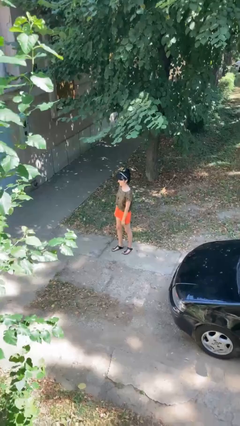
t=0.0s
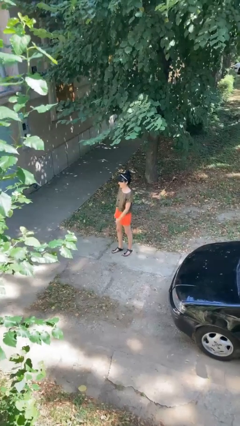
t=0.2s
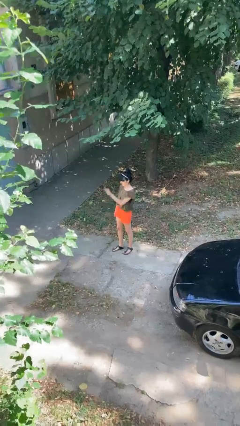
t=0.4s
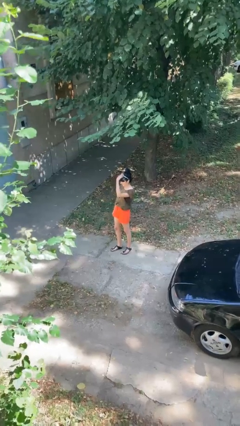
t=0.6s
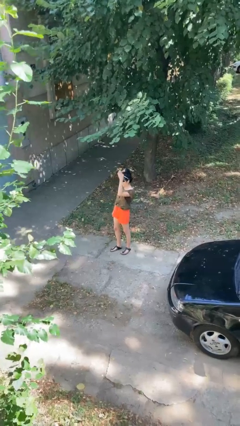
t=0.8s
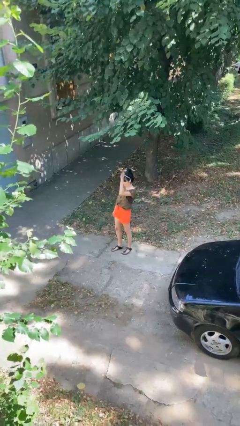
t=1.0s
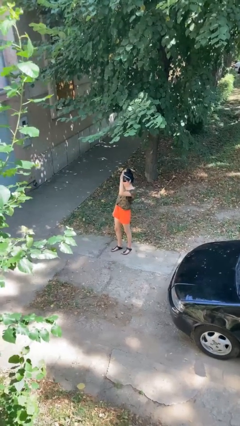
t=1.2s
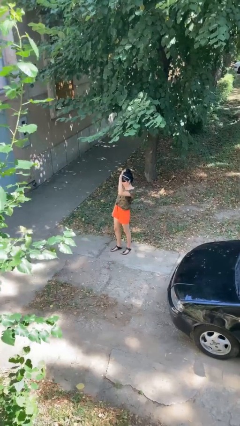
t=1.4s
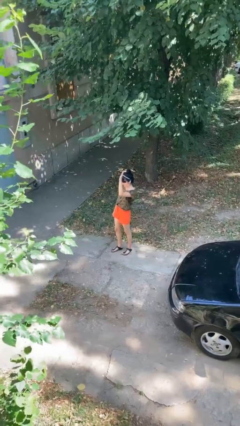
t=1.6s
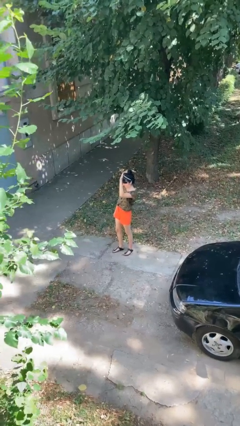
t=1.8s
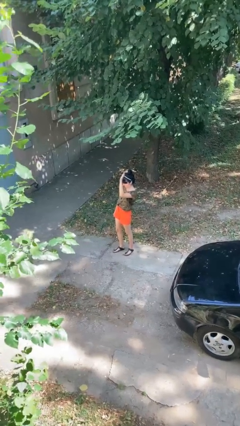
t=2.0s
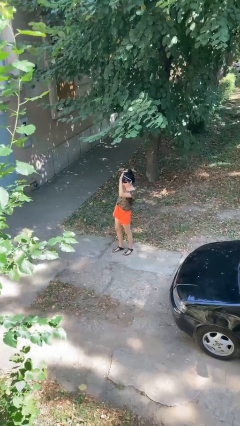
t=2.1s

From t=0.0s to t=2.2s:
person waves at person

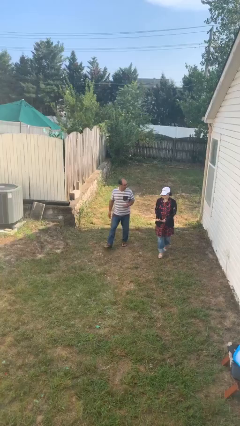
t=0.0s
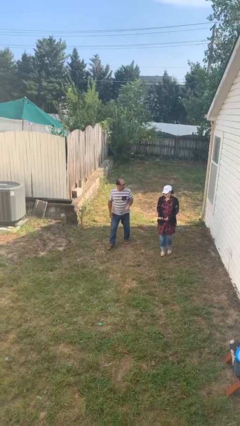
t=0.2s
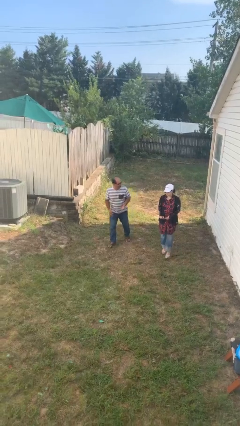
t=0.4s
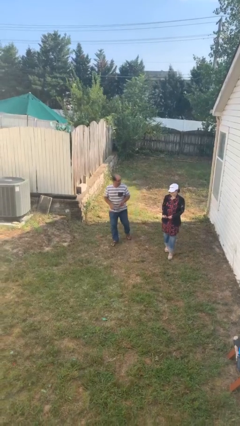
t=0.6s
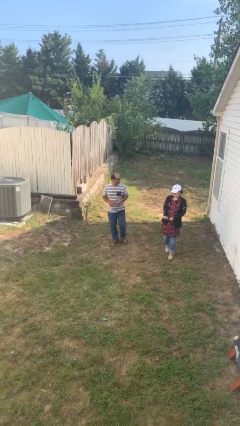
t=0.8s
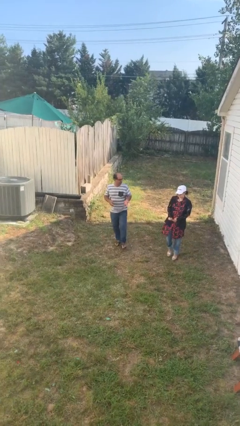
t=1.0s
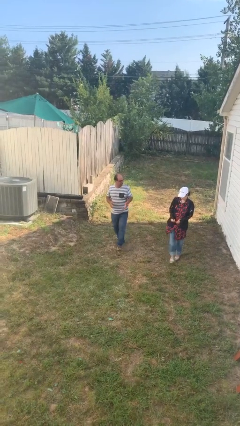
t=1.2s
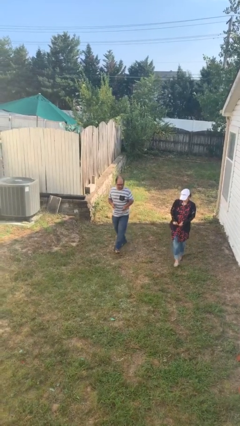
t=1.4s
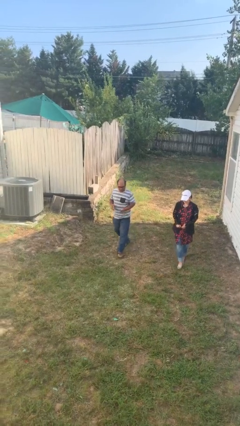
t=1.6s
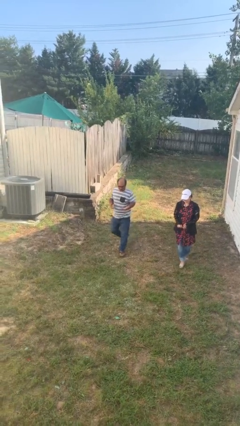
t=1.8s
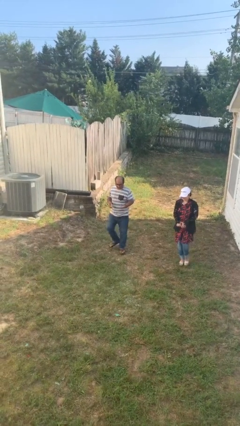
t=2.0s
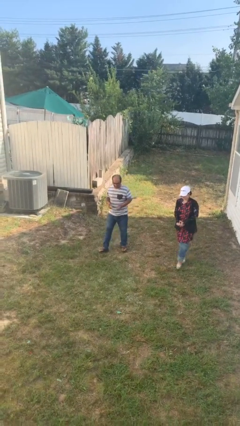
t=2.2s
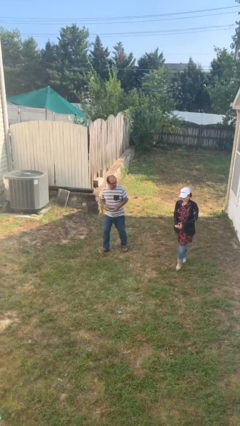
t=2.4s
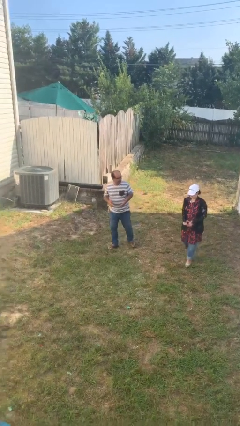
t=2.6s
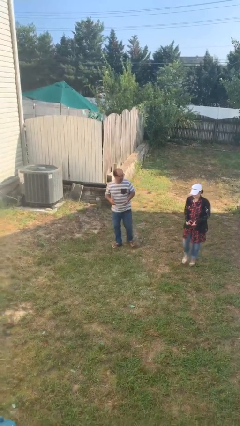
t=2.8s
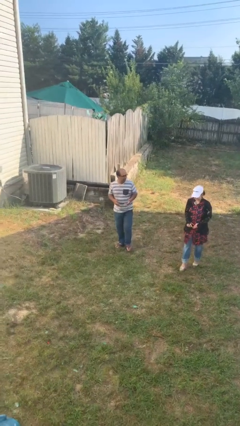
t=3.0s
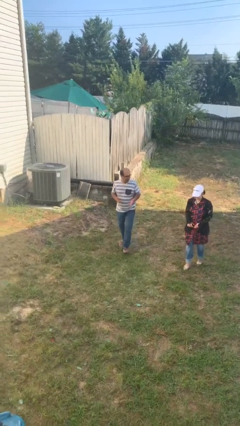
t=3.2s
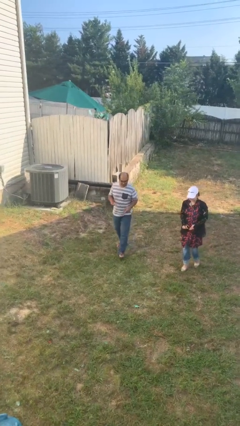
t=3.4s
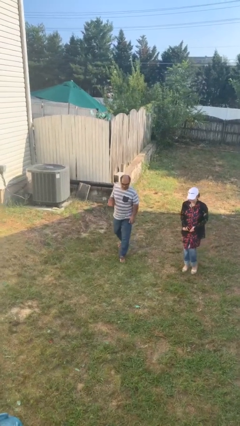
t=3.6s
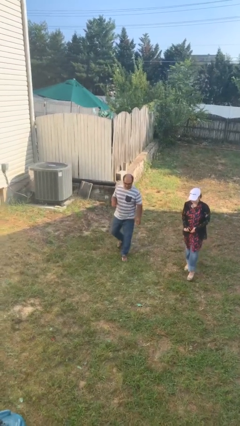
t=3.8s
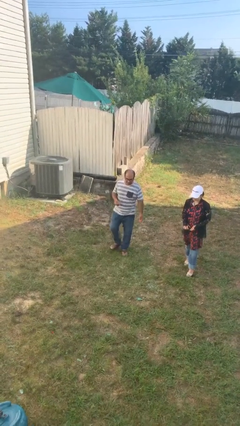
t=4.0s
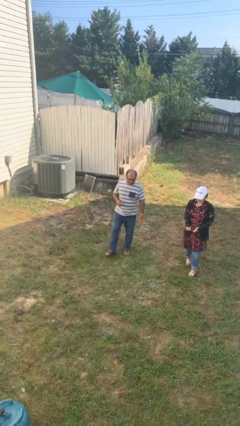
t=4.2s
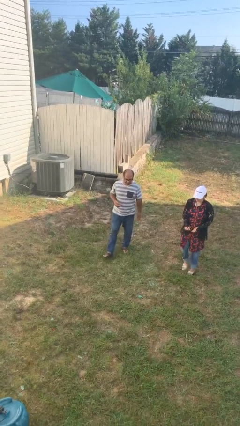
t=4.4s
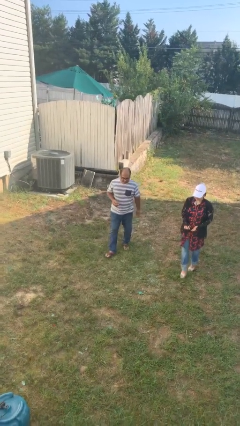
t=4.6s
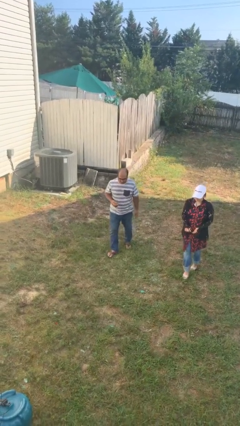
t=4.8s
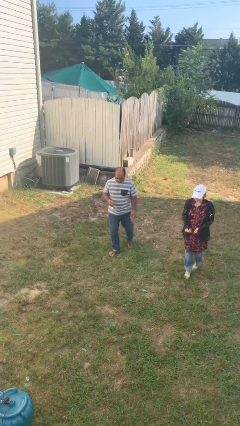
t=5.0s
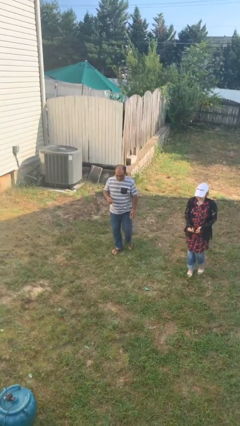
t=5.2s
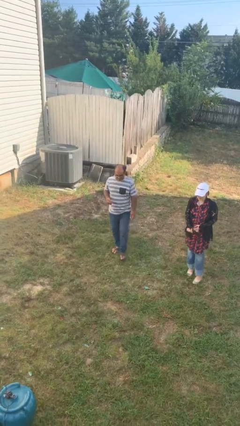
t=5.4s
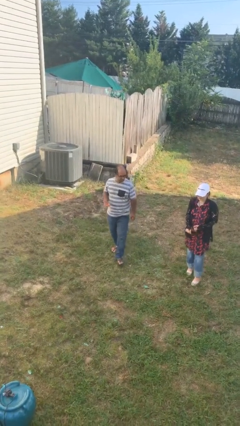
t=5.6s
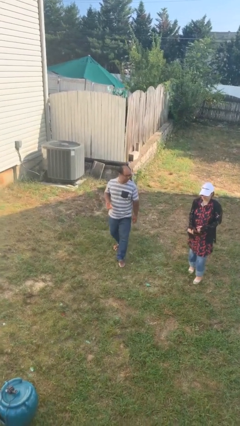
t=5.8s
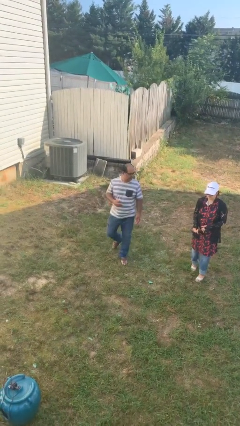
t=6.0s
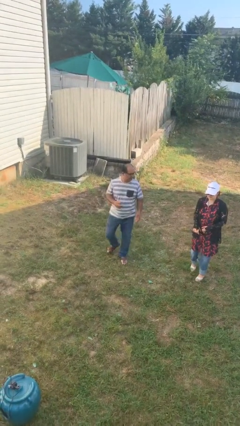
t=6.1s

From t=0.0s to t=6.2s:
person talks to person

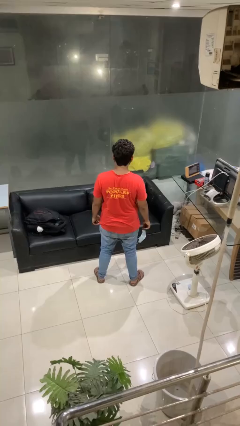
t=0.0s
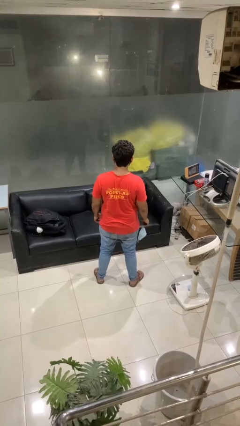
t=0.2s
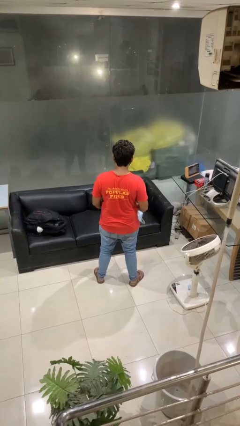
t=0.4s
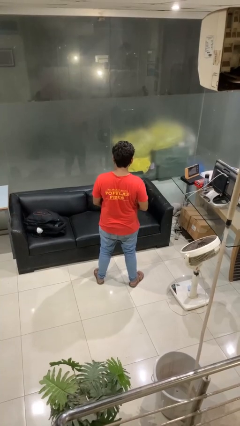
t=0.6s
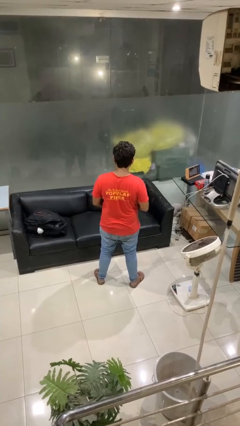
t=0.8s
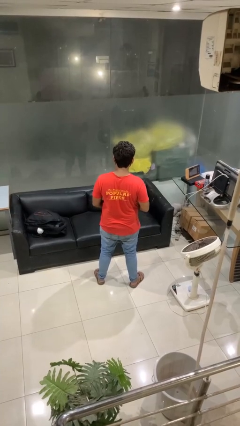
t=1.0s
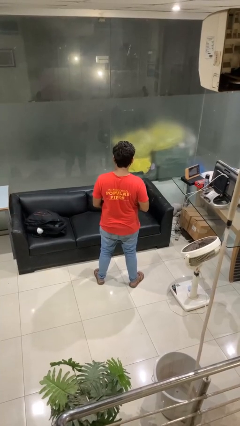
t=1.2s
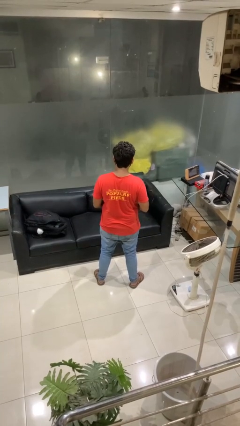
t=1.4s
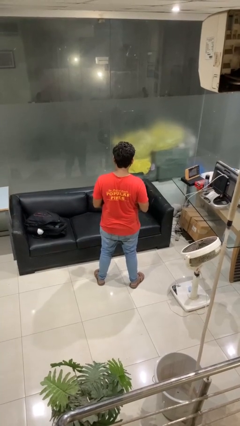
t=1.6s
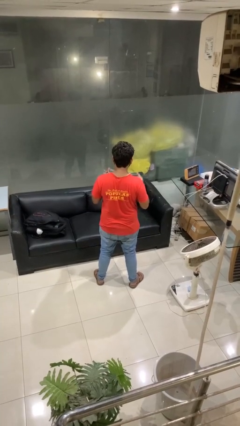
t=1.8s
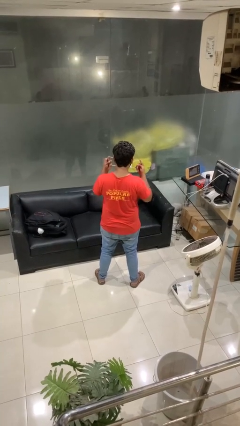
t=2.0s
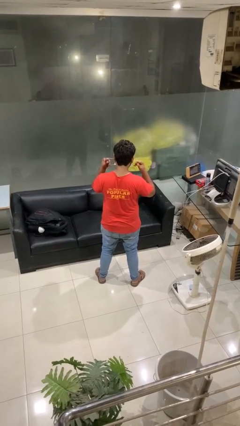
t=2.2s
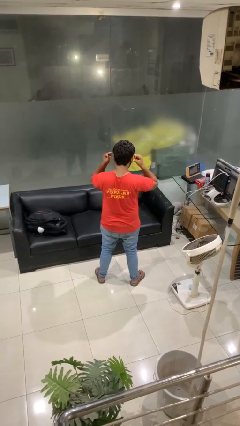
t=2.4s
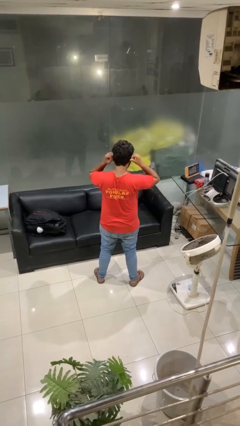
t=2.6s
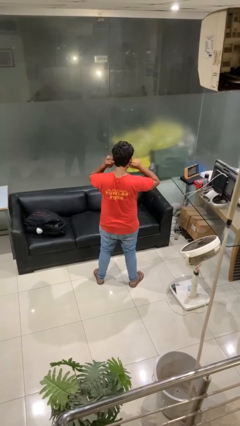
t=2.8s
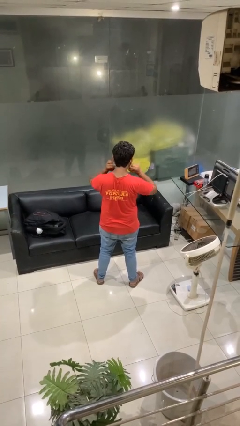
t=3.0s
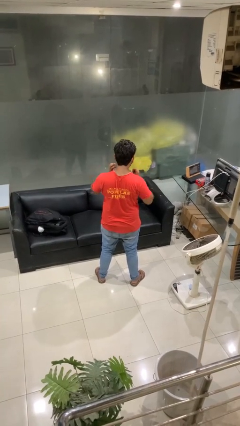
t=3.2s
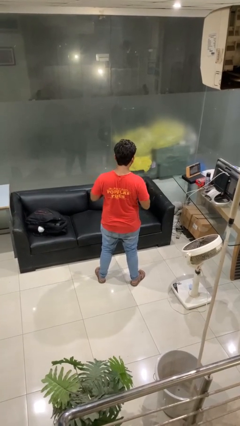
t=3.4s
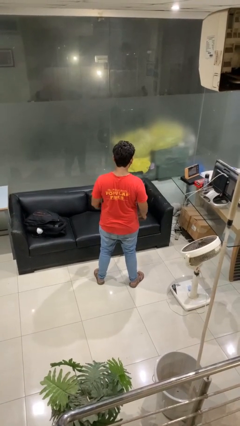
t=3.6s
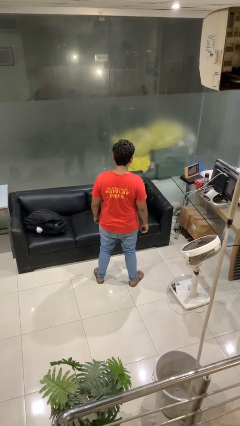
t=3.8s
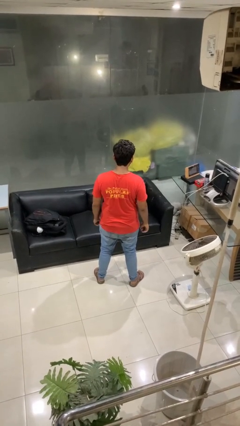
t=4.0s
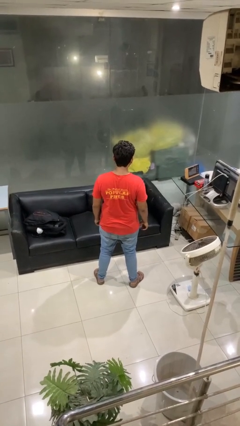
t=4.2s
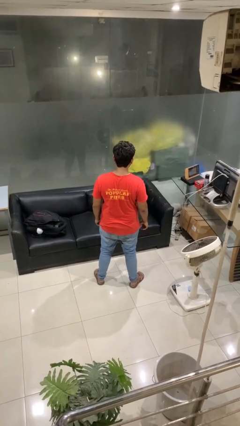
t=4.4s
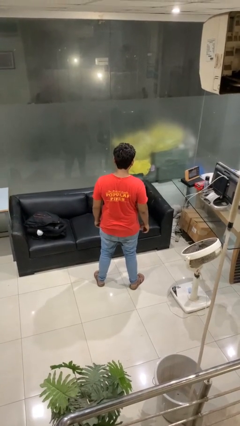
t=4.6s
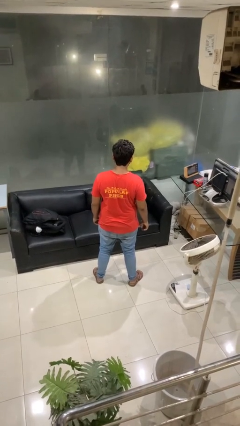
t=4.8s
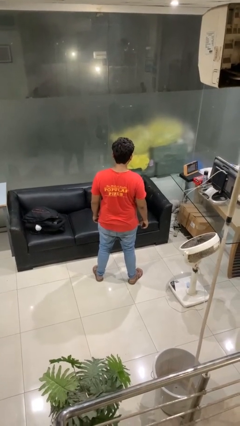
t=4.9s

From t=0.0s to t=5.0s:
person puts on facemask

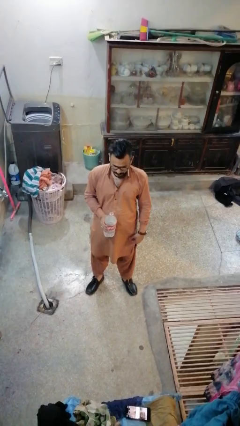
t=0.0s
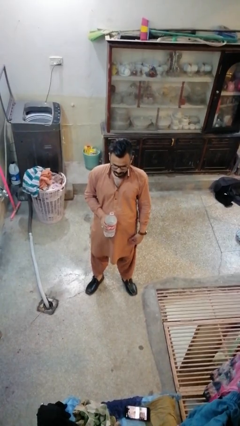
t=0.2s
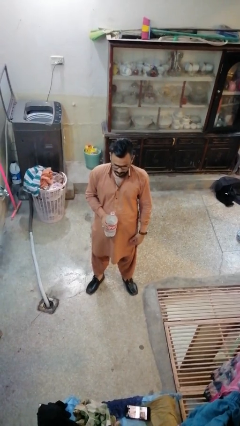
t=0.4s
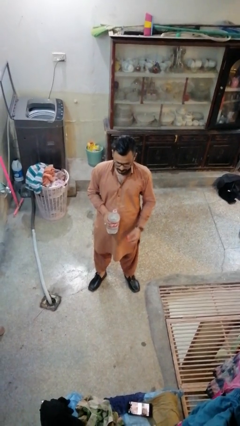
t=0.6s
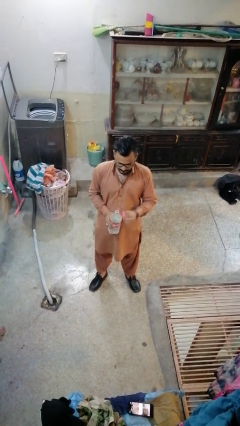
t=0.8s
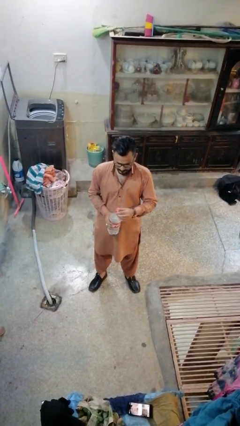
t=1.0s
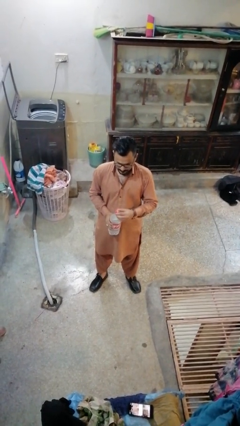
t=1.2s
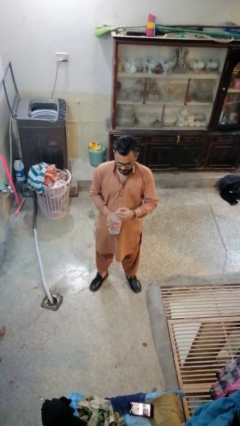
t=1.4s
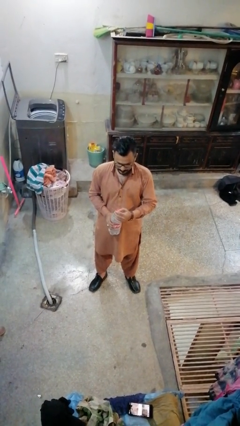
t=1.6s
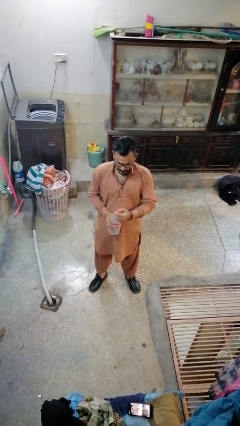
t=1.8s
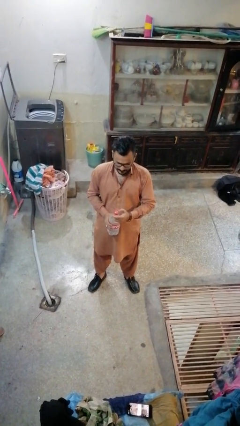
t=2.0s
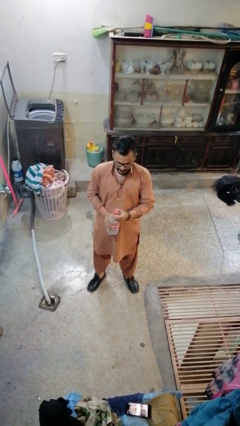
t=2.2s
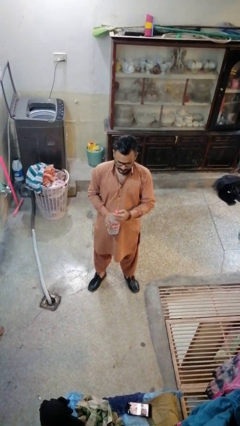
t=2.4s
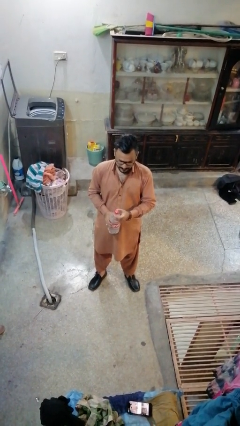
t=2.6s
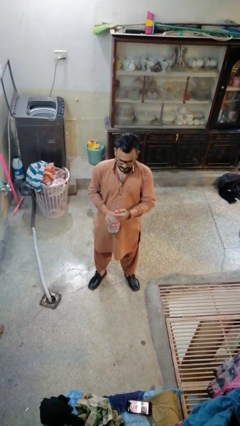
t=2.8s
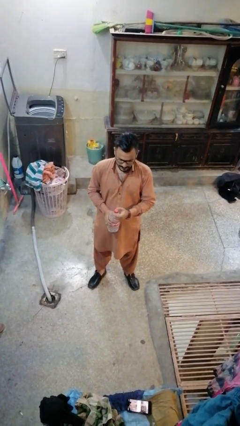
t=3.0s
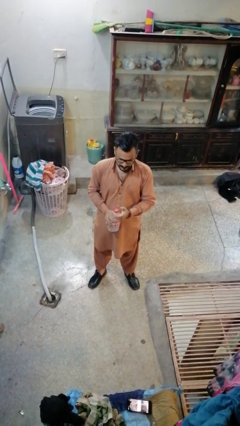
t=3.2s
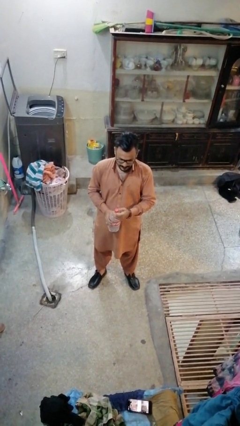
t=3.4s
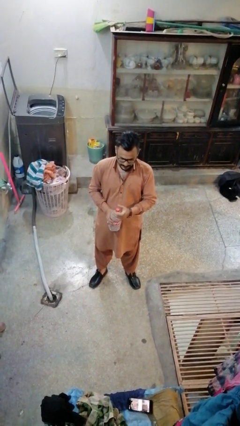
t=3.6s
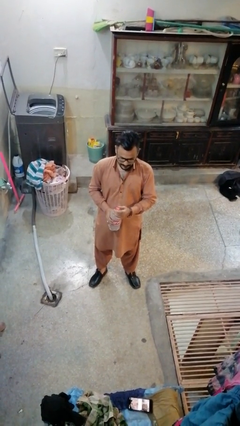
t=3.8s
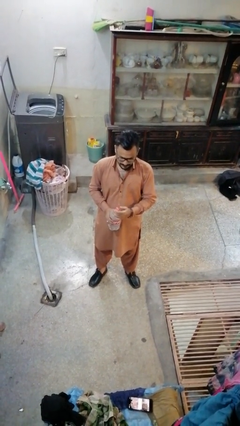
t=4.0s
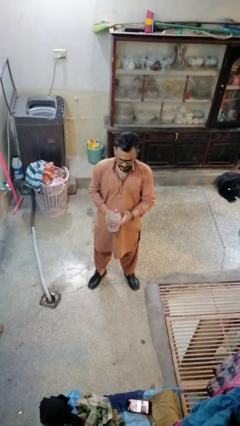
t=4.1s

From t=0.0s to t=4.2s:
person screws lid to bottle

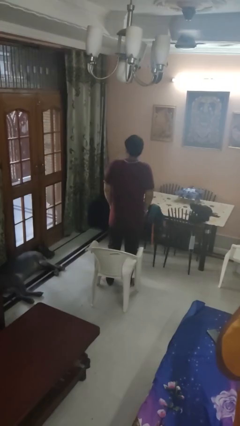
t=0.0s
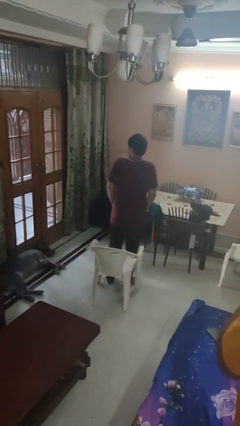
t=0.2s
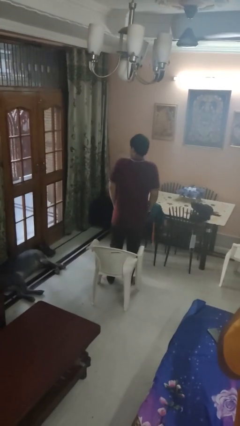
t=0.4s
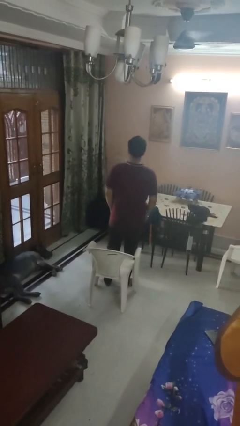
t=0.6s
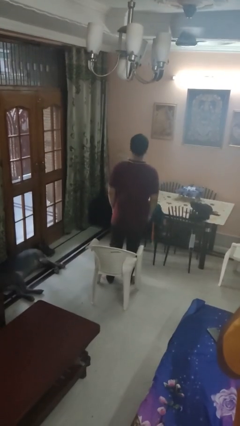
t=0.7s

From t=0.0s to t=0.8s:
person shrugs
